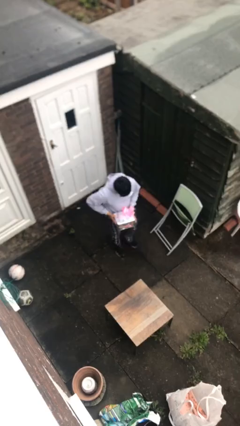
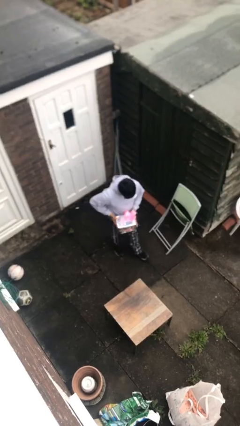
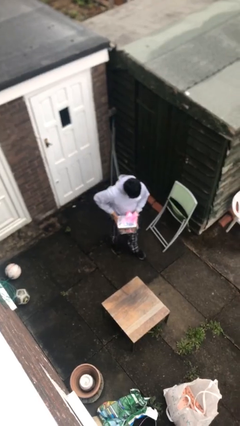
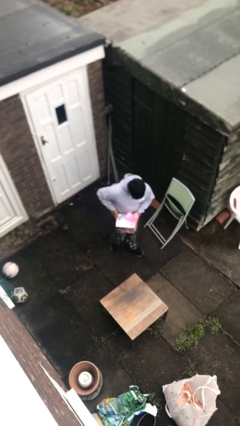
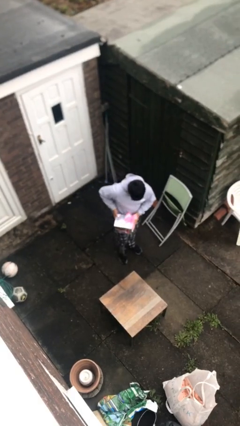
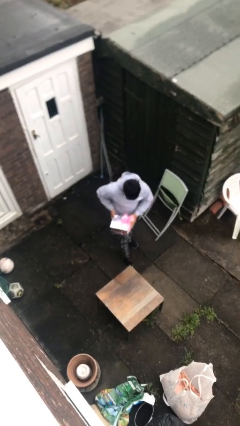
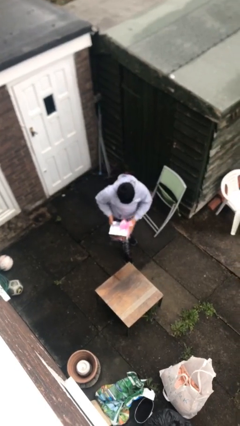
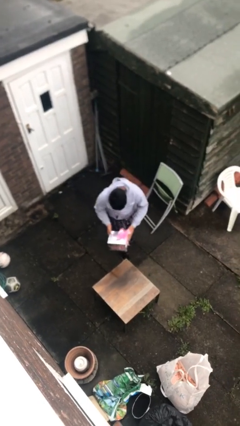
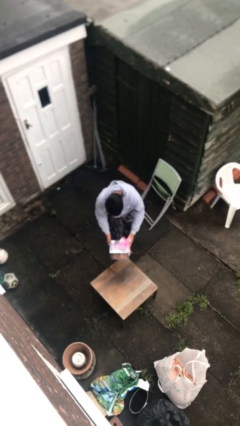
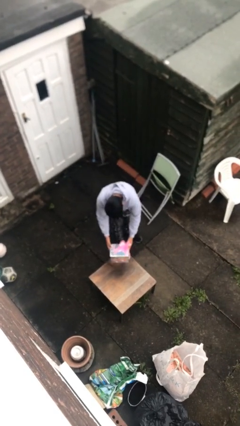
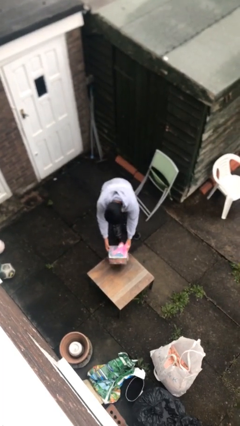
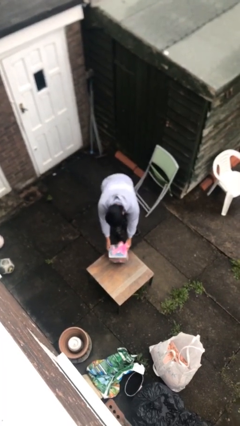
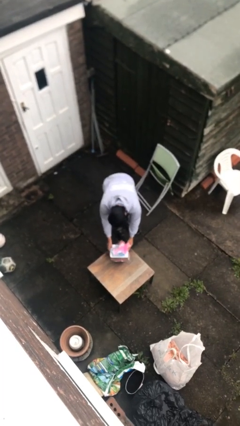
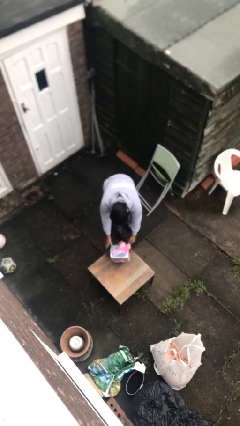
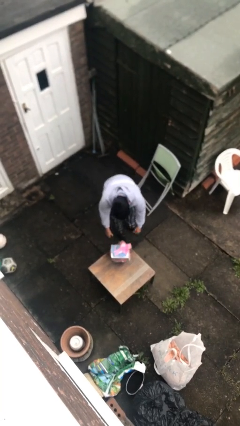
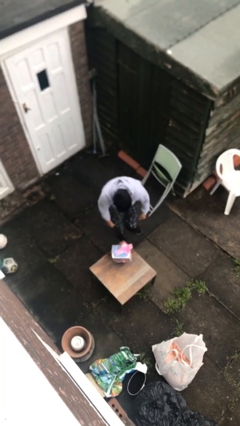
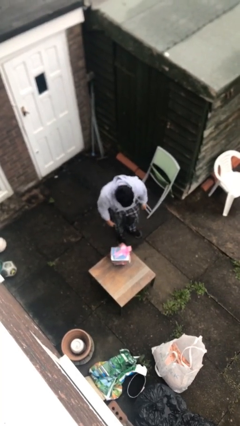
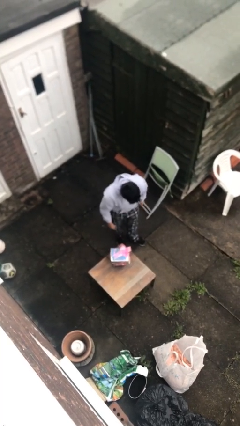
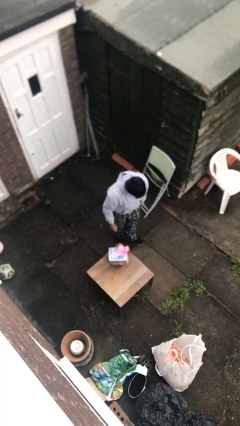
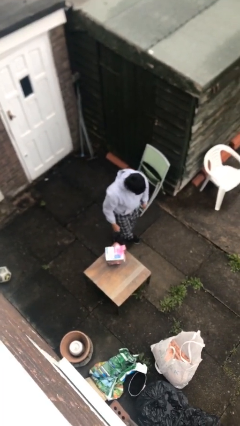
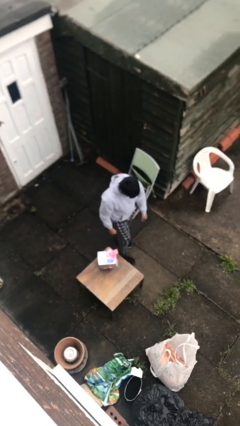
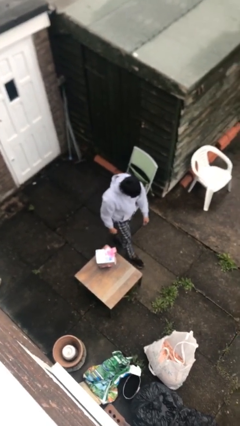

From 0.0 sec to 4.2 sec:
person puts down object on table

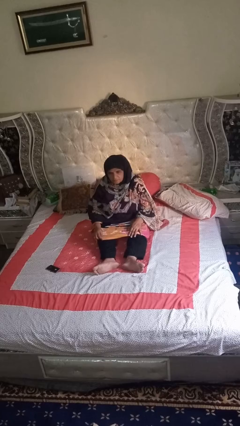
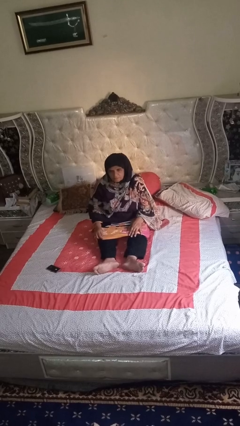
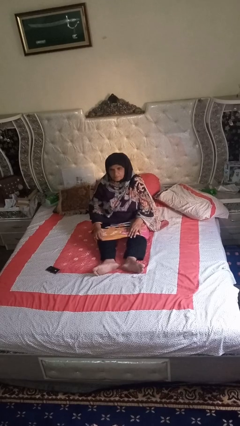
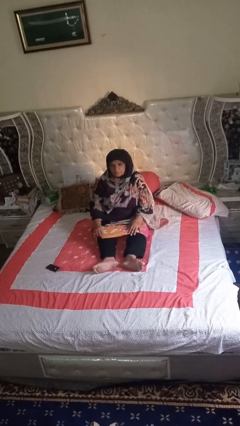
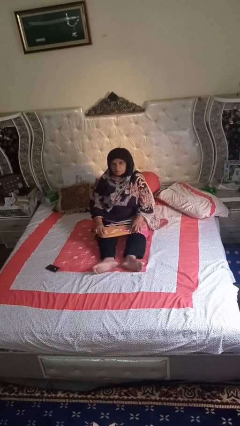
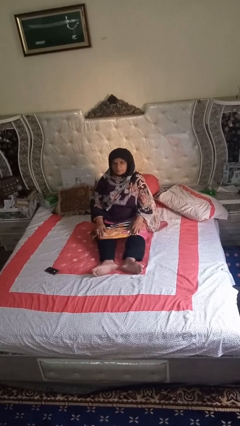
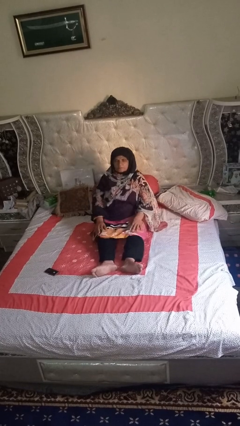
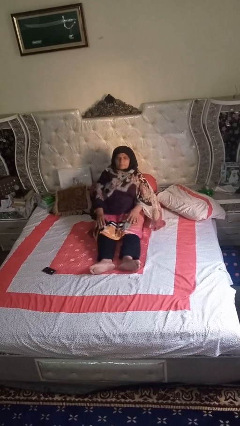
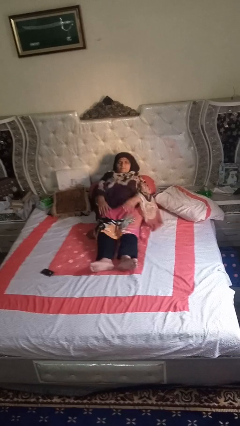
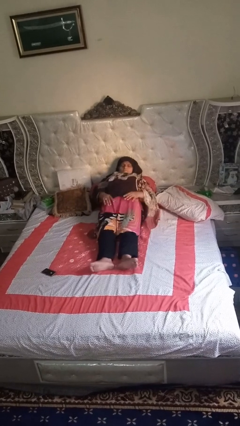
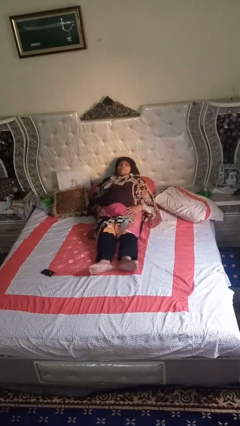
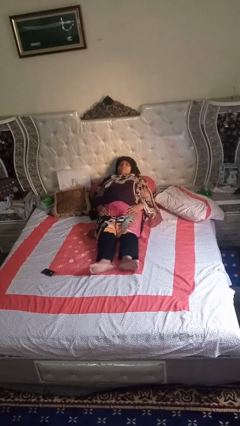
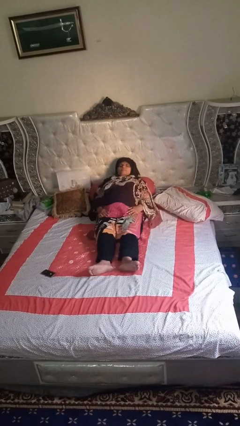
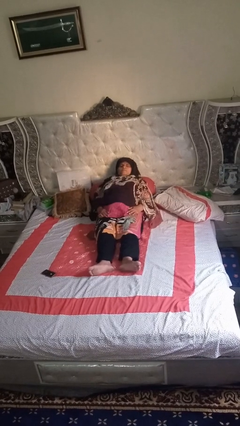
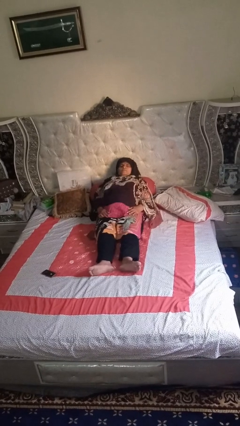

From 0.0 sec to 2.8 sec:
person lies down on bed

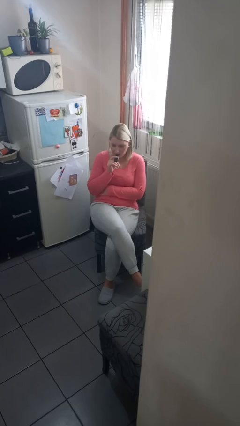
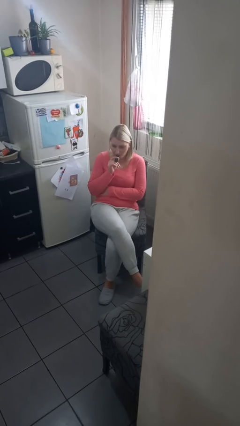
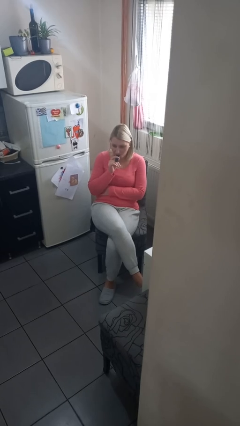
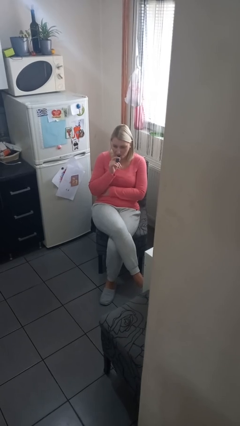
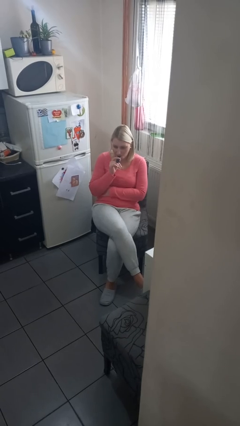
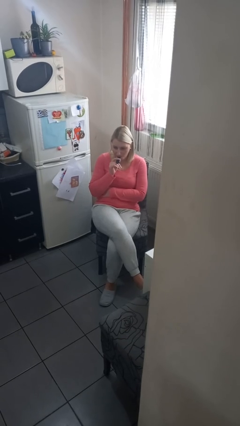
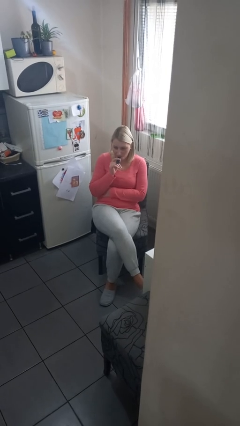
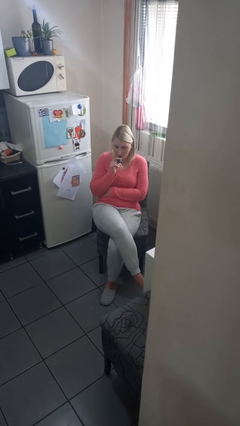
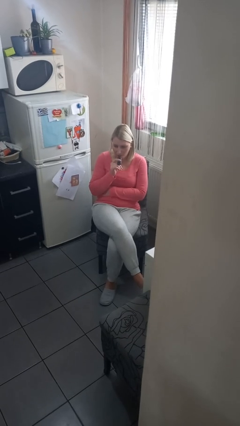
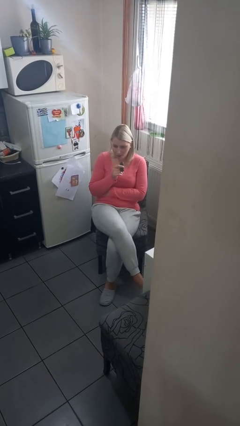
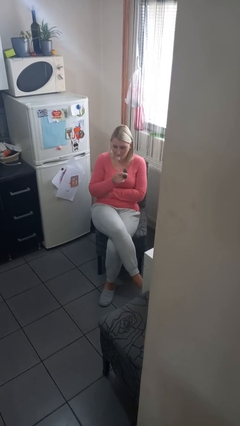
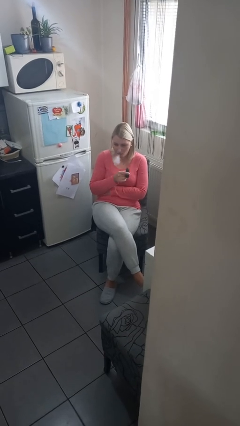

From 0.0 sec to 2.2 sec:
person vapes

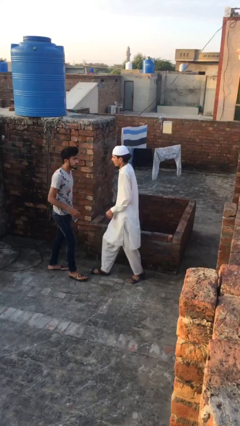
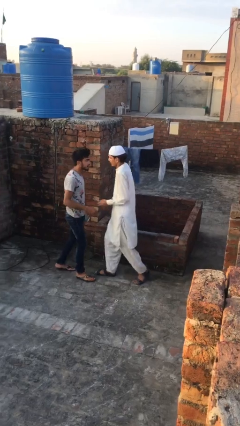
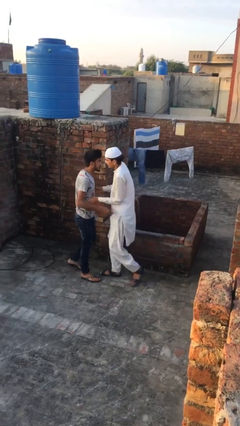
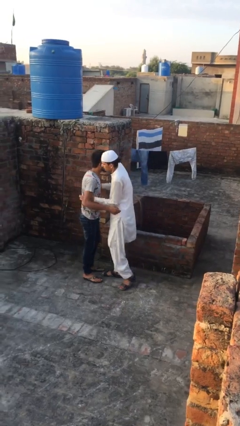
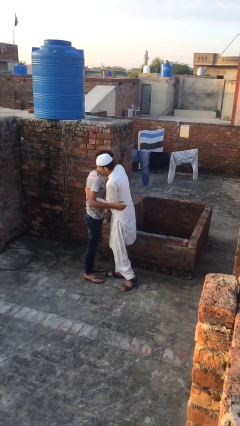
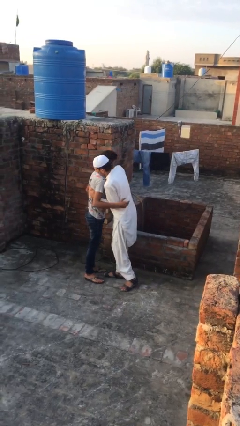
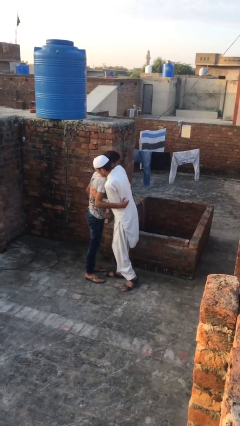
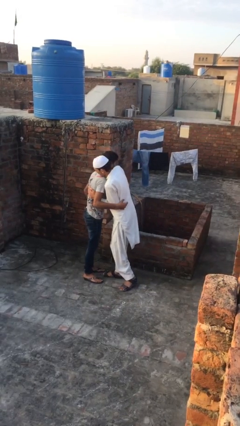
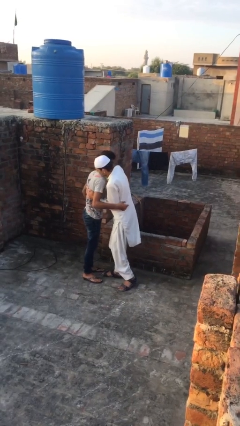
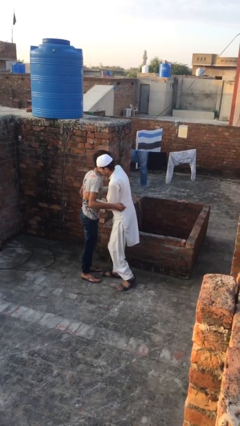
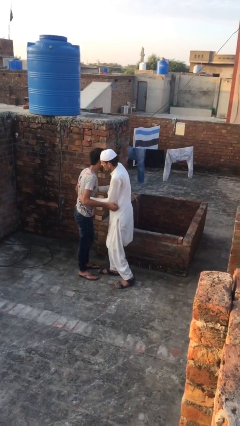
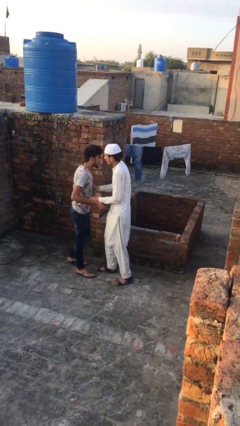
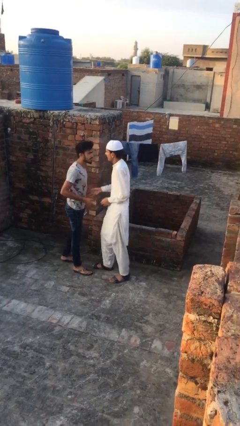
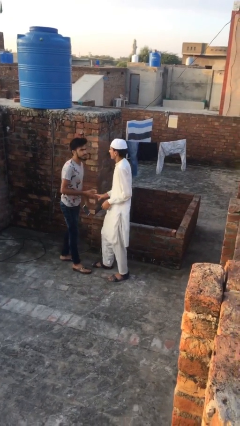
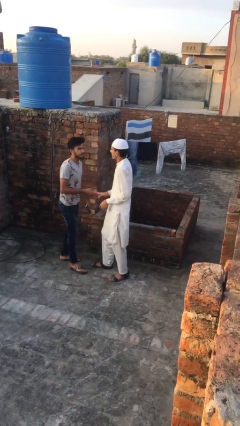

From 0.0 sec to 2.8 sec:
person embraces person

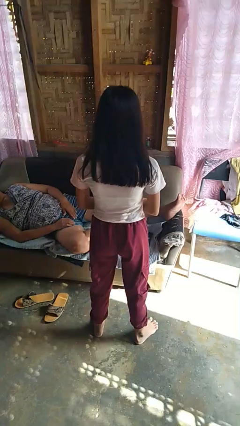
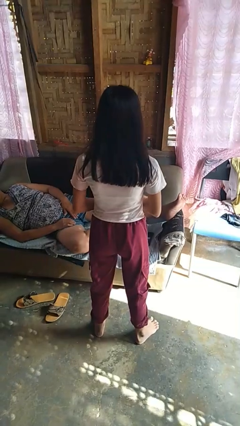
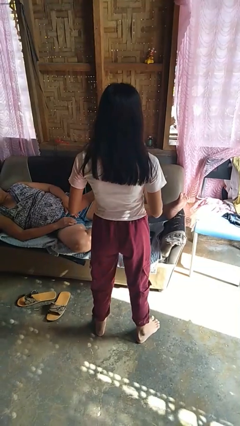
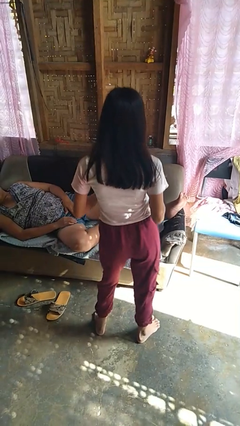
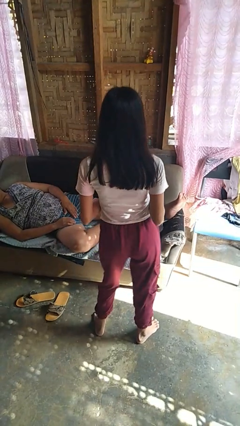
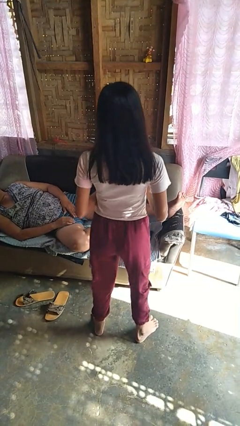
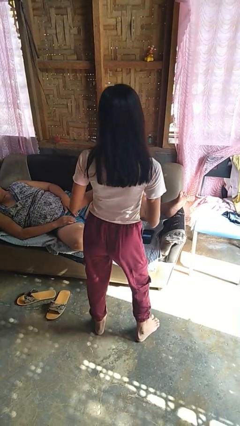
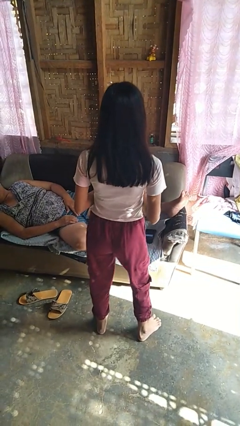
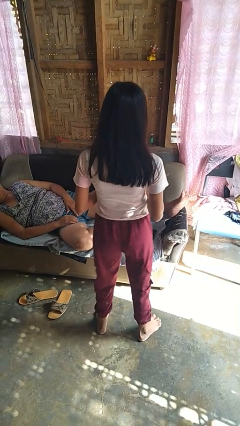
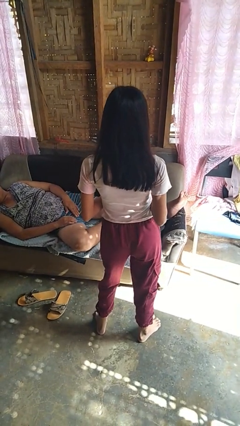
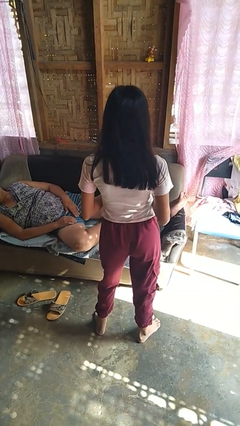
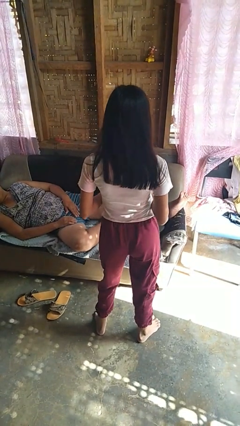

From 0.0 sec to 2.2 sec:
person wiggles hips

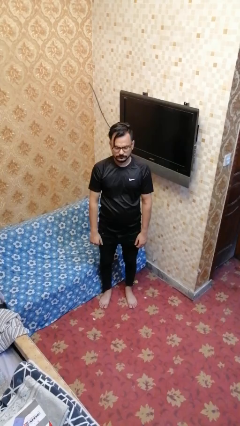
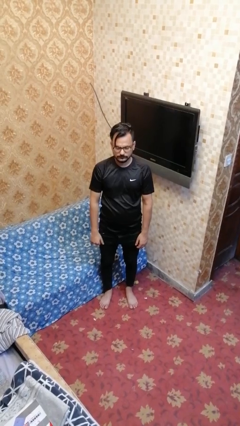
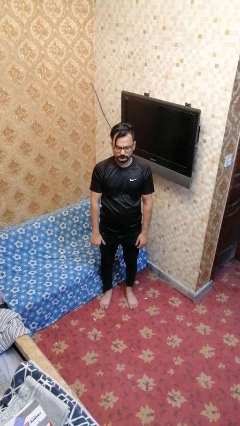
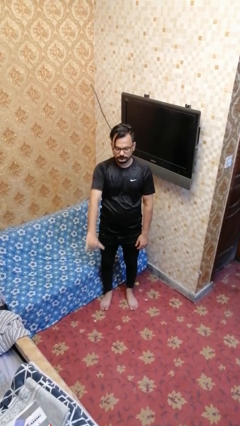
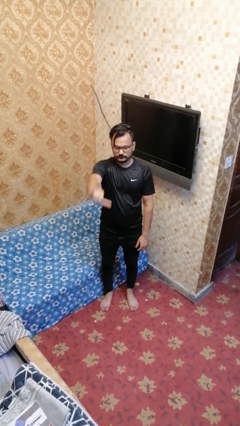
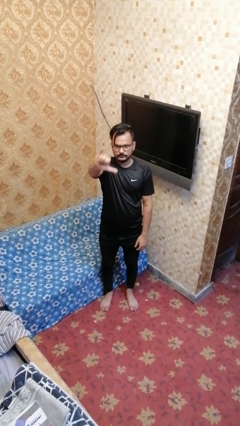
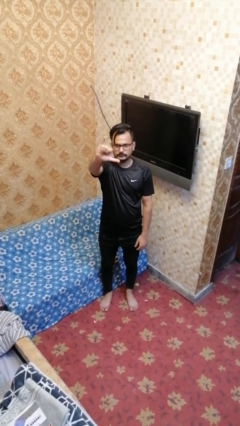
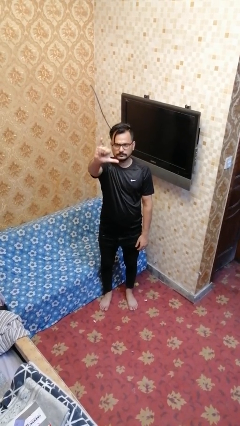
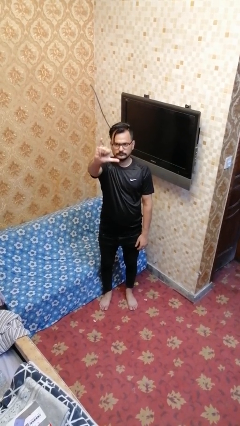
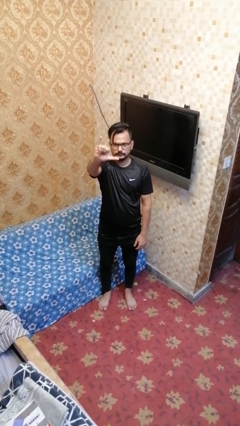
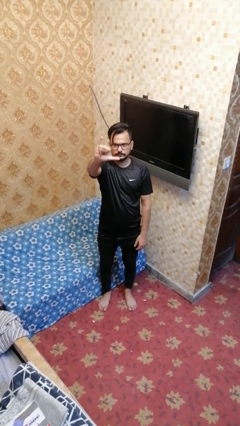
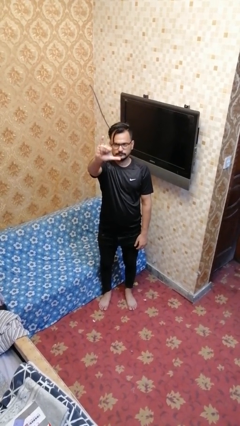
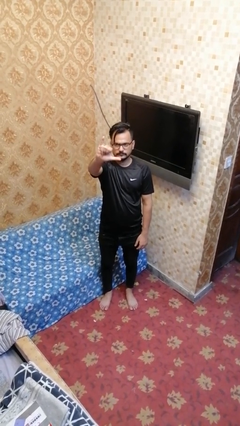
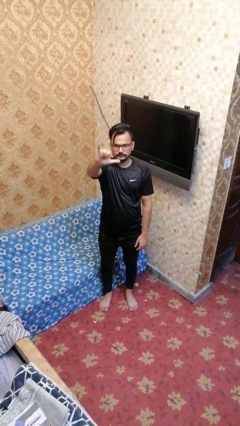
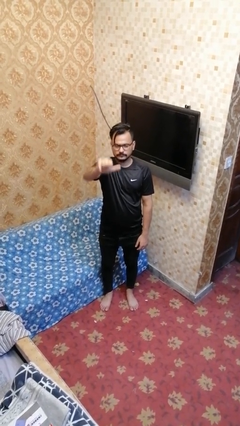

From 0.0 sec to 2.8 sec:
person gestures hang loose

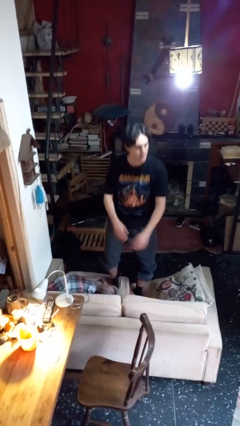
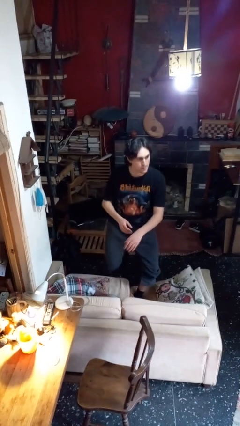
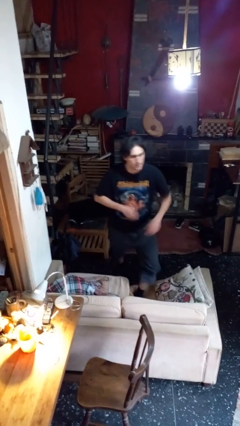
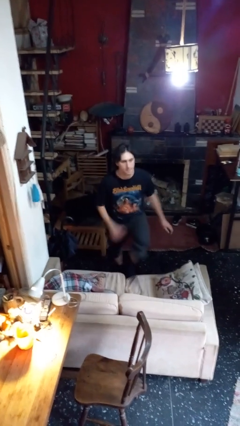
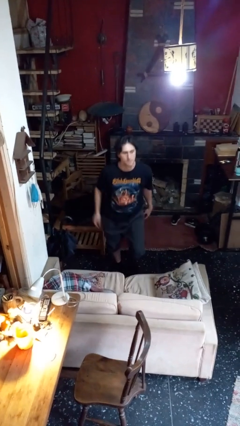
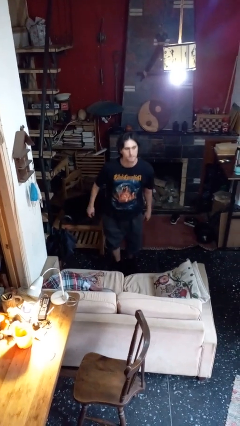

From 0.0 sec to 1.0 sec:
person climbs off couch
